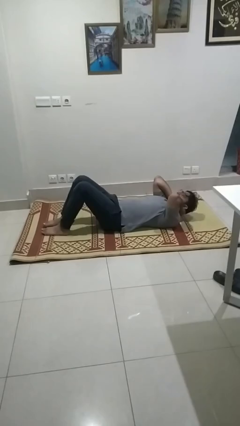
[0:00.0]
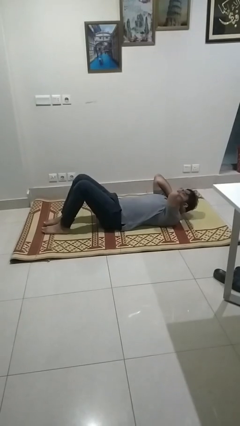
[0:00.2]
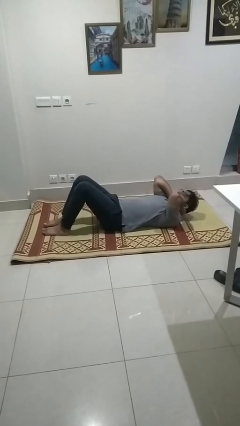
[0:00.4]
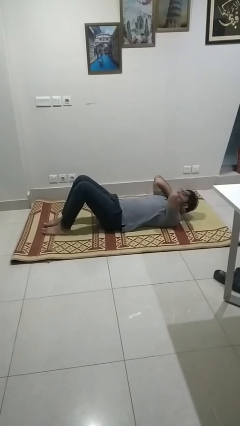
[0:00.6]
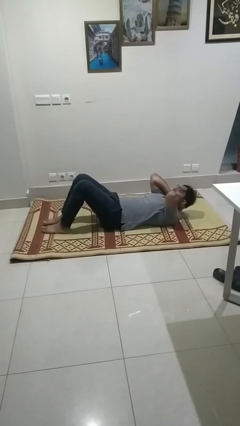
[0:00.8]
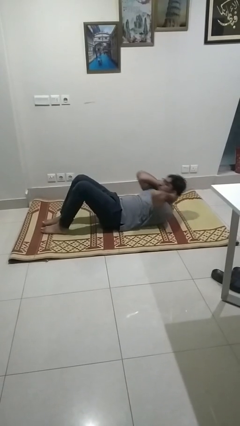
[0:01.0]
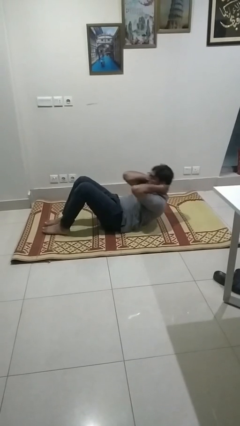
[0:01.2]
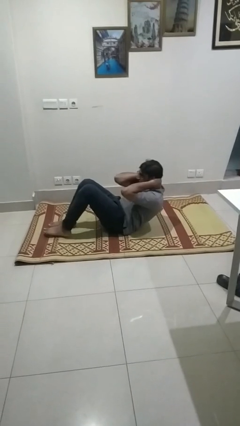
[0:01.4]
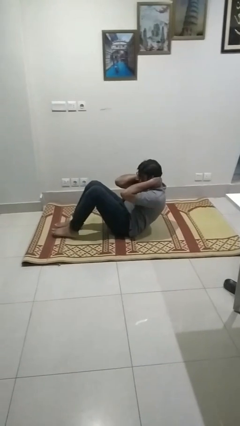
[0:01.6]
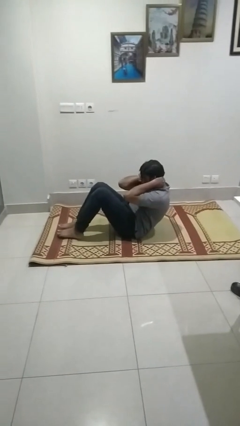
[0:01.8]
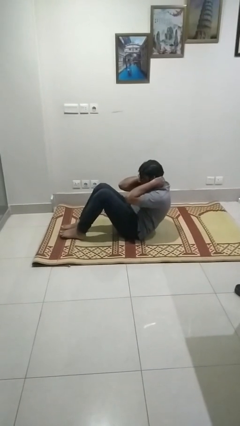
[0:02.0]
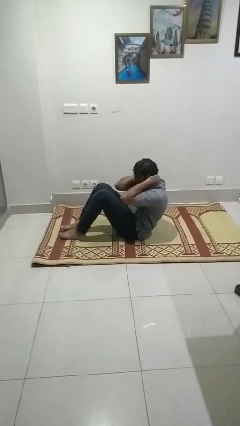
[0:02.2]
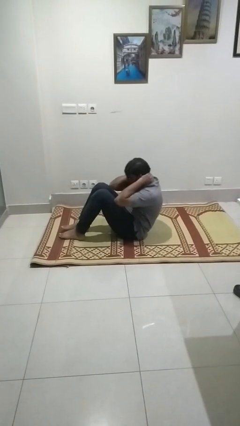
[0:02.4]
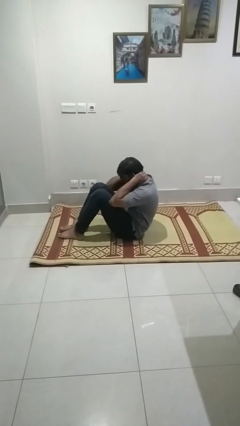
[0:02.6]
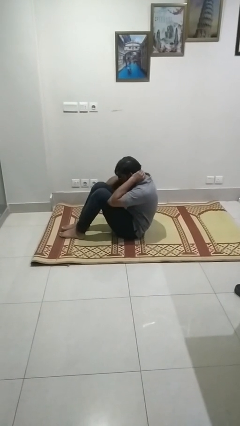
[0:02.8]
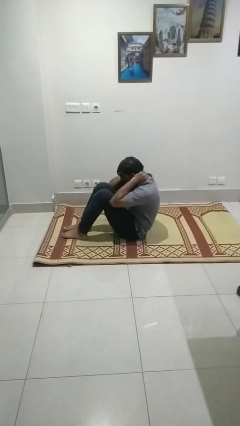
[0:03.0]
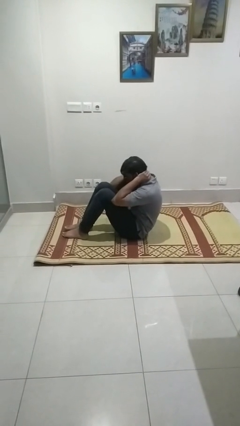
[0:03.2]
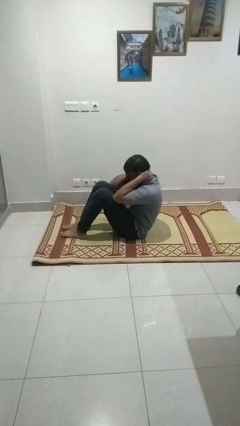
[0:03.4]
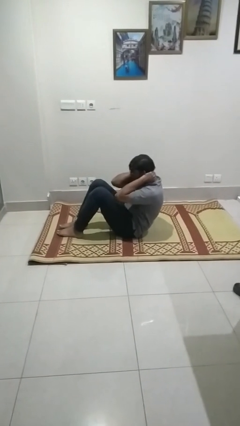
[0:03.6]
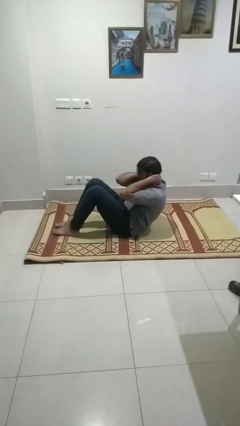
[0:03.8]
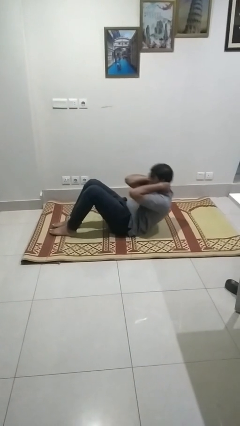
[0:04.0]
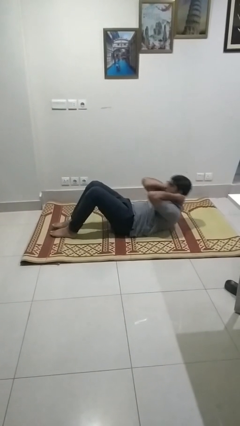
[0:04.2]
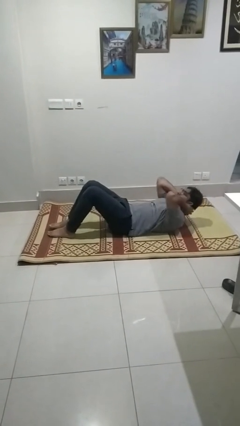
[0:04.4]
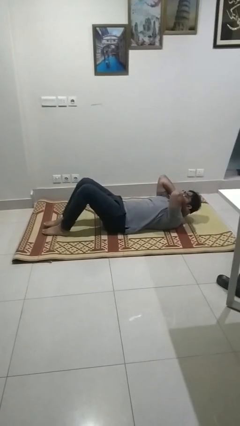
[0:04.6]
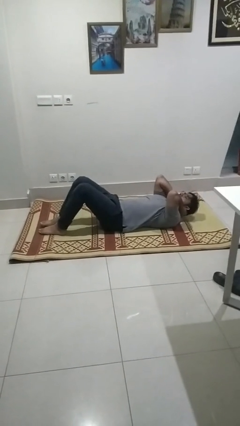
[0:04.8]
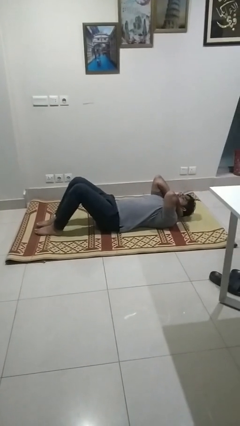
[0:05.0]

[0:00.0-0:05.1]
person exercises with situp

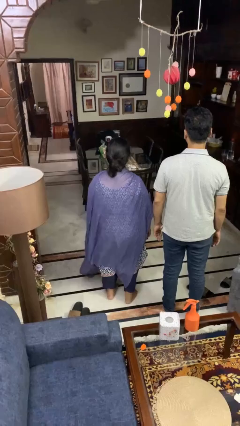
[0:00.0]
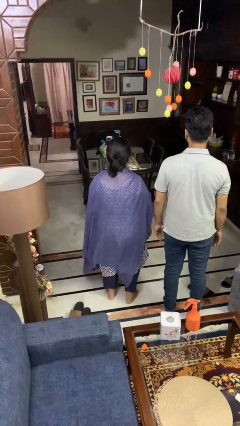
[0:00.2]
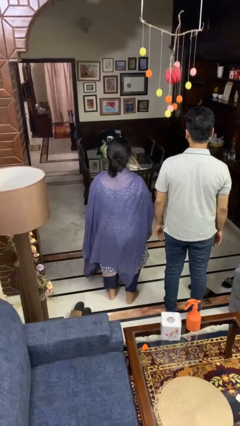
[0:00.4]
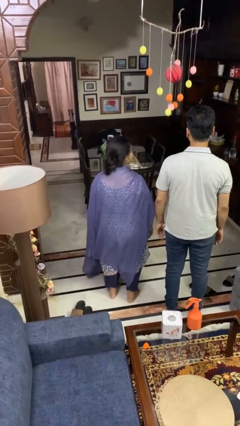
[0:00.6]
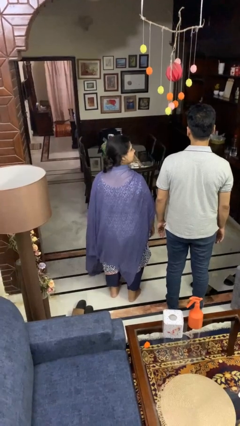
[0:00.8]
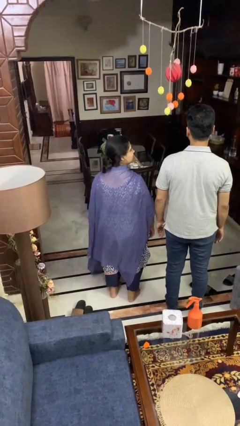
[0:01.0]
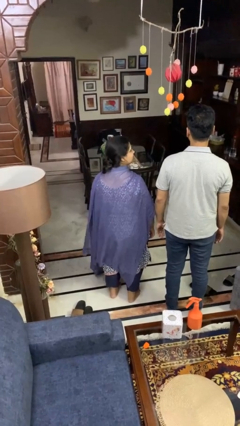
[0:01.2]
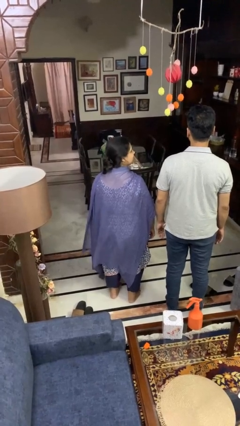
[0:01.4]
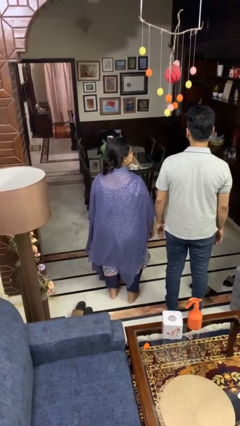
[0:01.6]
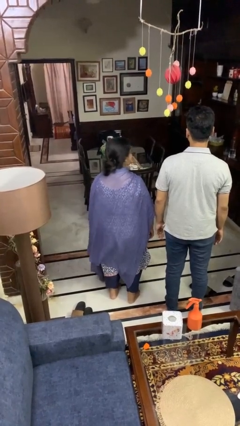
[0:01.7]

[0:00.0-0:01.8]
person looks over shoulder

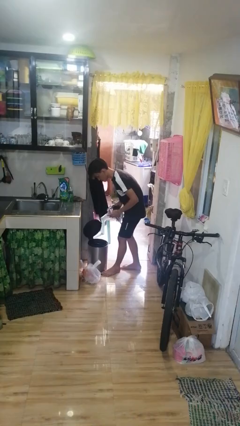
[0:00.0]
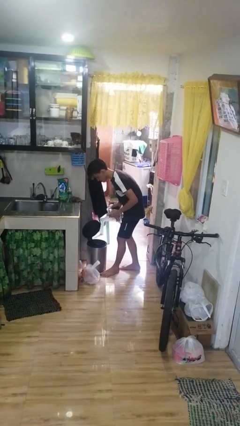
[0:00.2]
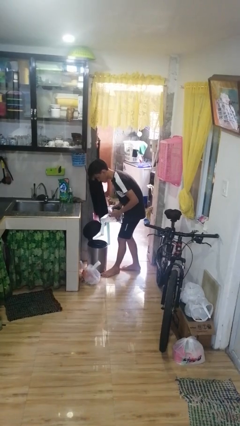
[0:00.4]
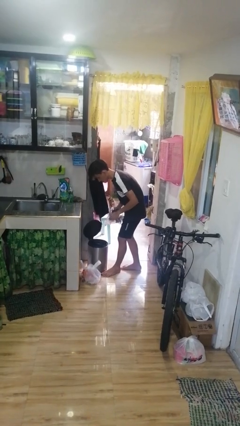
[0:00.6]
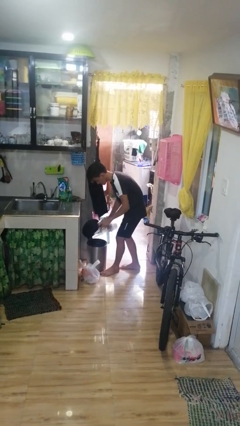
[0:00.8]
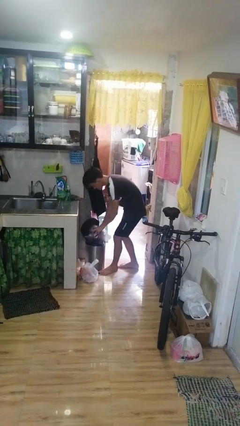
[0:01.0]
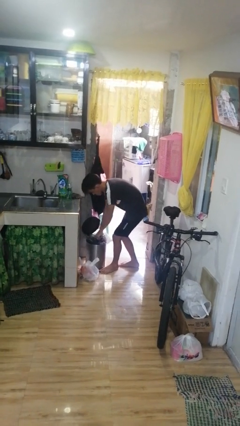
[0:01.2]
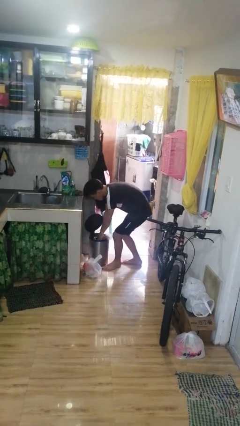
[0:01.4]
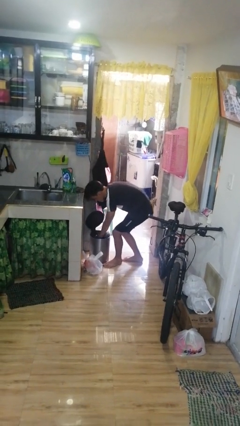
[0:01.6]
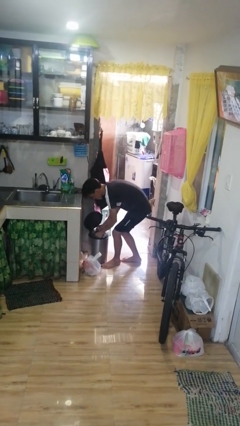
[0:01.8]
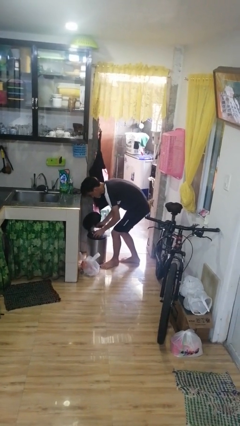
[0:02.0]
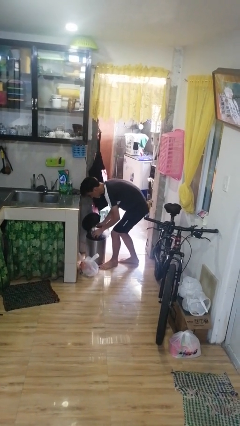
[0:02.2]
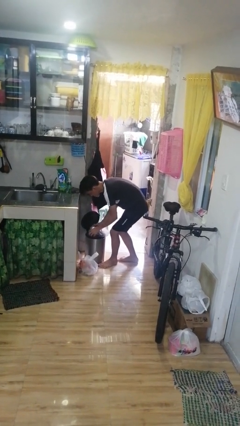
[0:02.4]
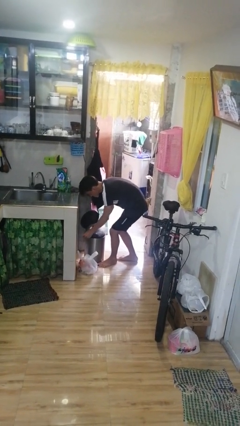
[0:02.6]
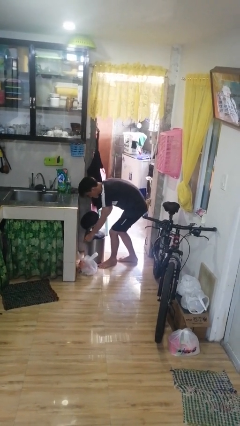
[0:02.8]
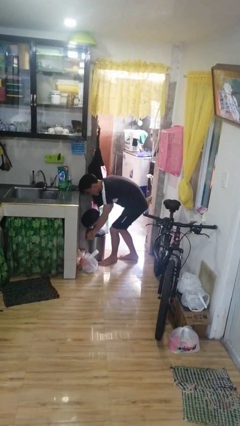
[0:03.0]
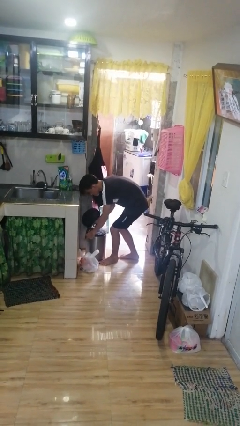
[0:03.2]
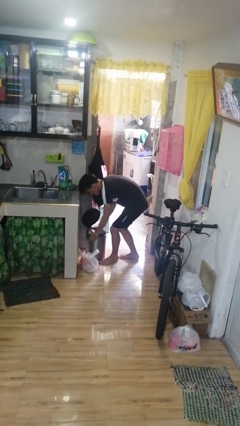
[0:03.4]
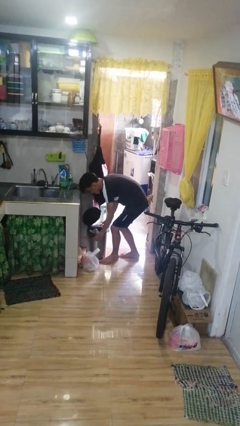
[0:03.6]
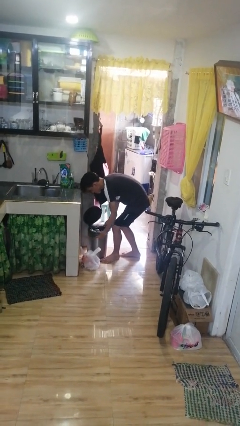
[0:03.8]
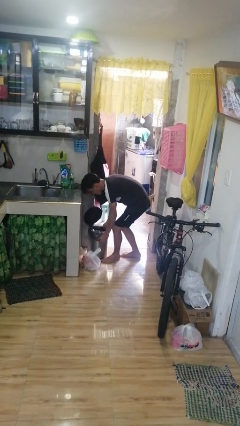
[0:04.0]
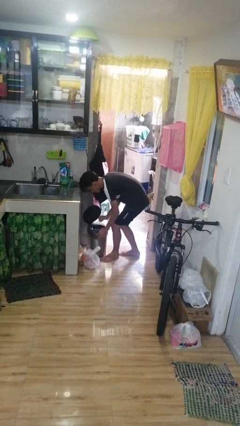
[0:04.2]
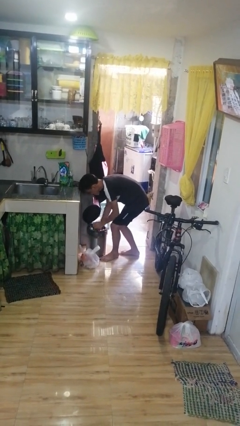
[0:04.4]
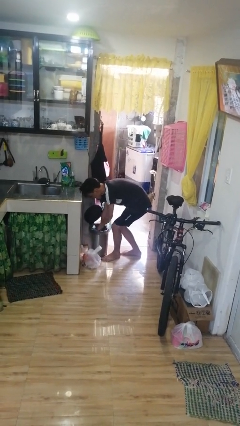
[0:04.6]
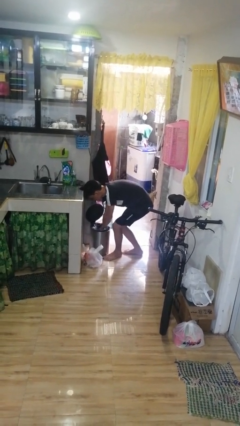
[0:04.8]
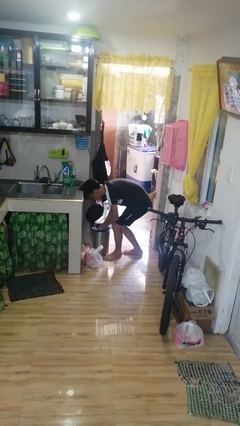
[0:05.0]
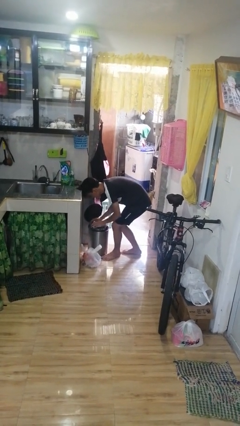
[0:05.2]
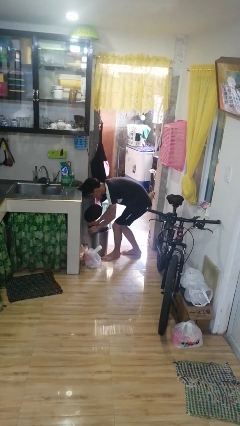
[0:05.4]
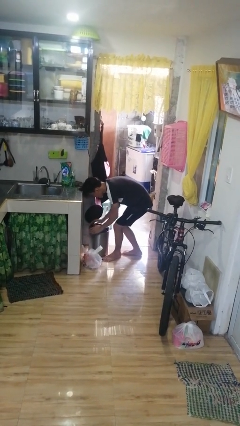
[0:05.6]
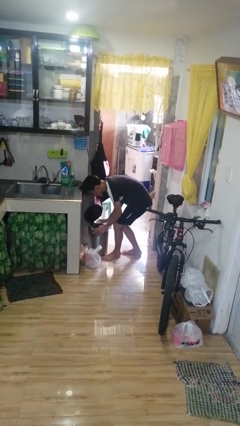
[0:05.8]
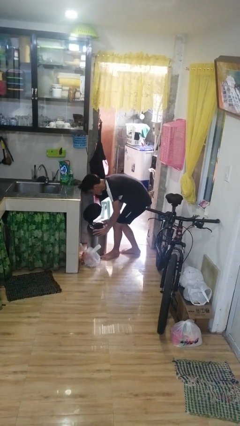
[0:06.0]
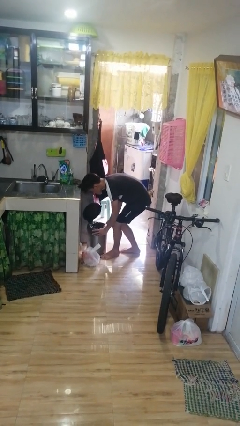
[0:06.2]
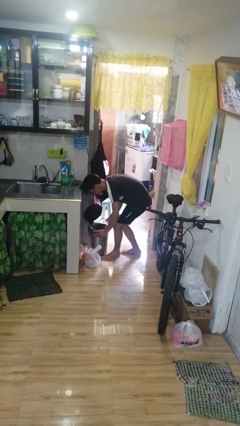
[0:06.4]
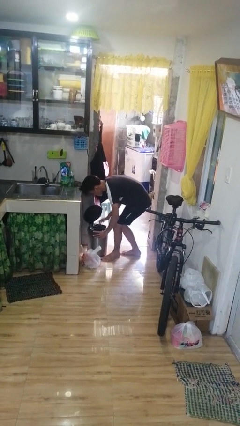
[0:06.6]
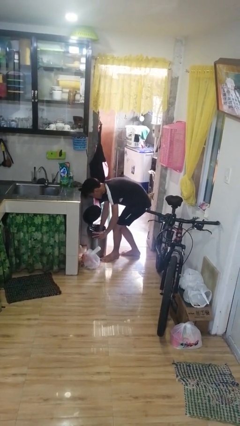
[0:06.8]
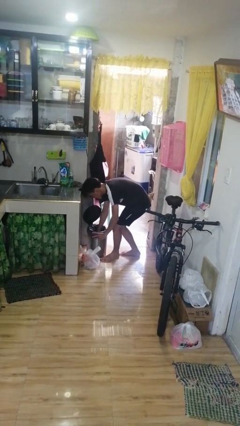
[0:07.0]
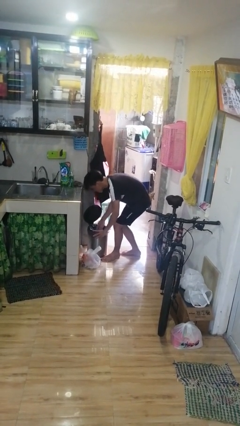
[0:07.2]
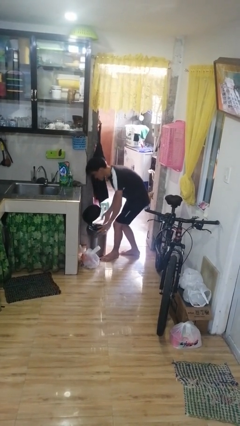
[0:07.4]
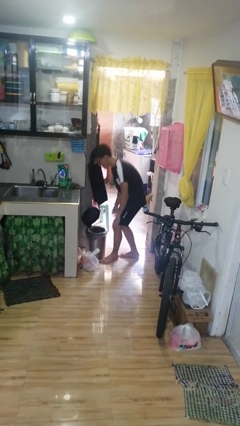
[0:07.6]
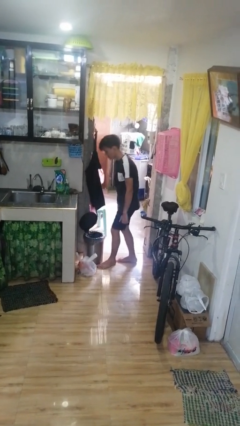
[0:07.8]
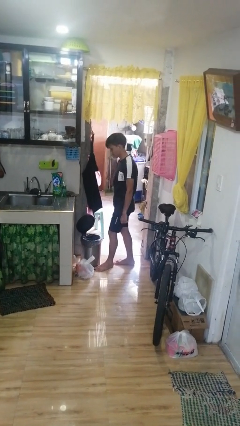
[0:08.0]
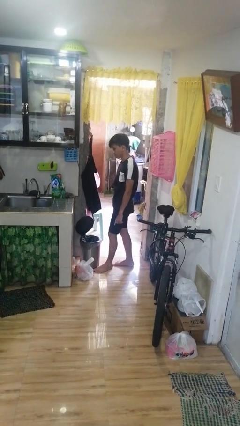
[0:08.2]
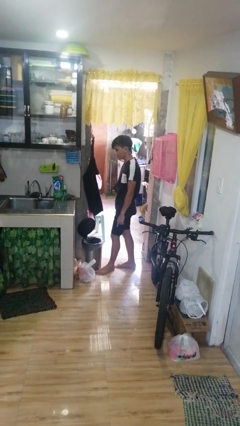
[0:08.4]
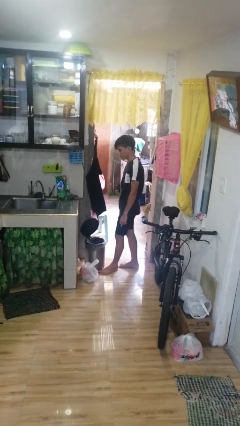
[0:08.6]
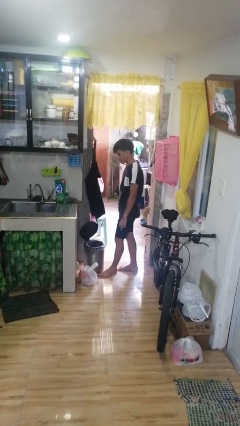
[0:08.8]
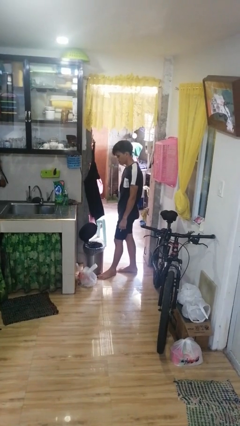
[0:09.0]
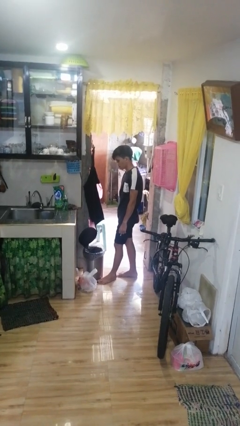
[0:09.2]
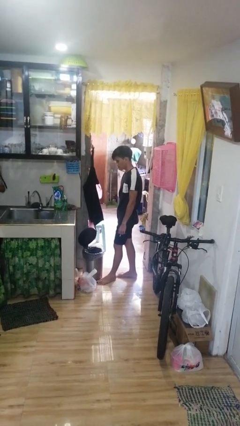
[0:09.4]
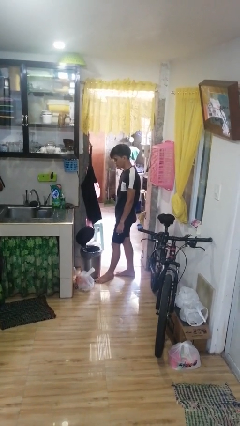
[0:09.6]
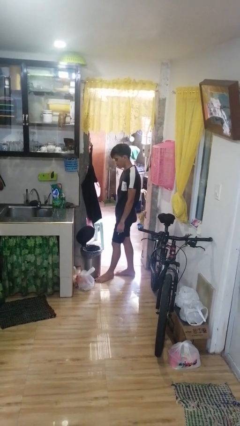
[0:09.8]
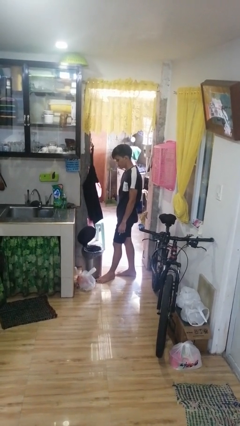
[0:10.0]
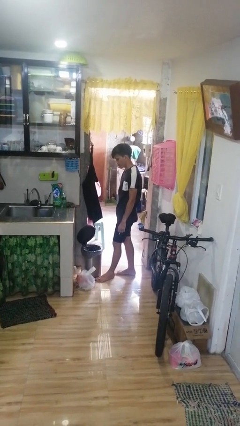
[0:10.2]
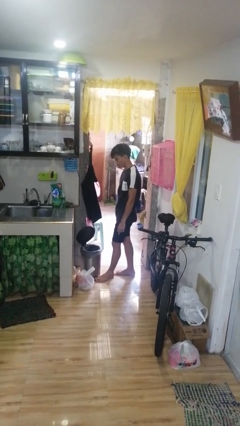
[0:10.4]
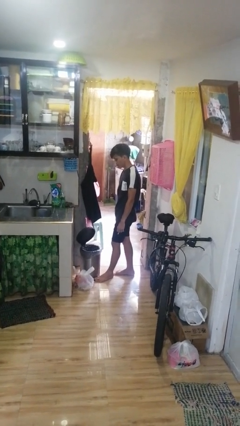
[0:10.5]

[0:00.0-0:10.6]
person inserts trashbag into trashcan

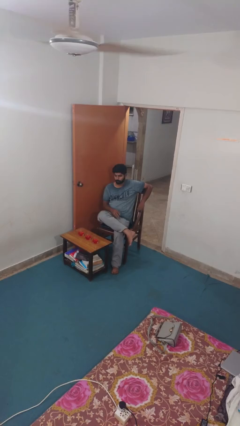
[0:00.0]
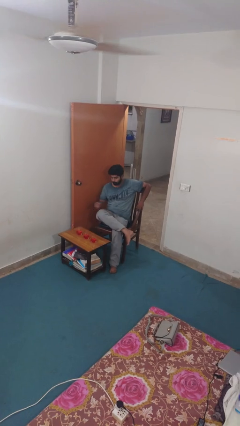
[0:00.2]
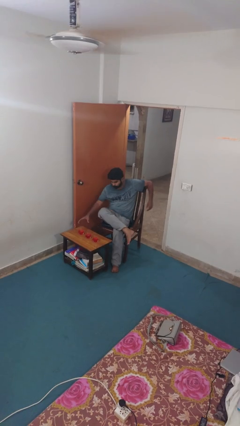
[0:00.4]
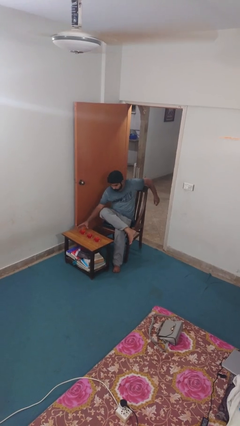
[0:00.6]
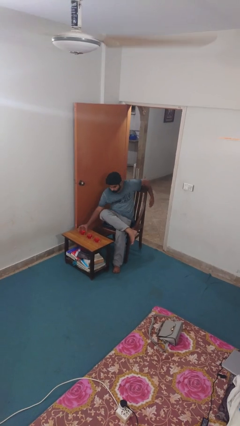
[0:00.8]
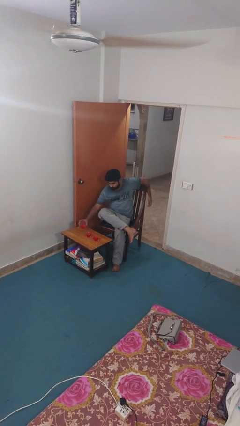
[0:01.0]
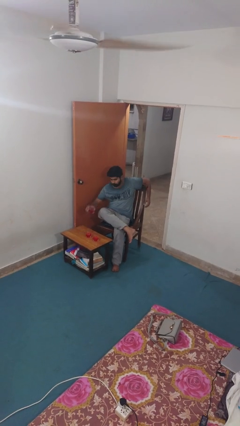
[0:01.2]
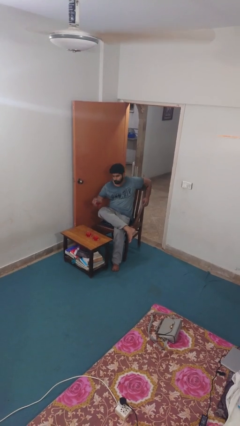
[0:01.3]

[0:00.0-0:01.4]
person picks up object from table
